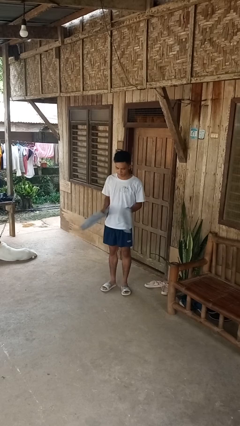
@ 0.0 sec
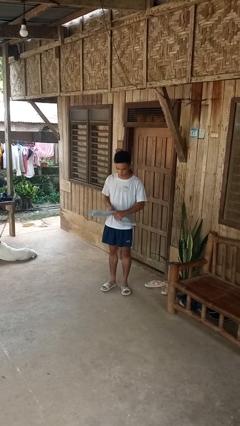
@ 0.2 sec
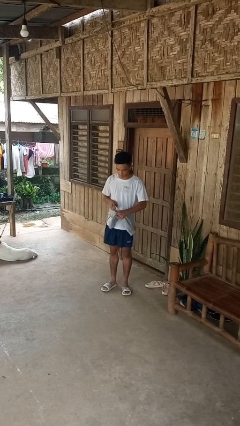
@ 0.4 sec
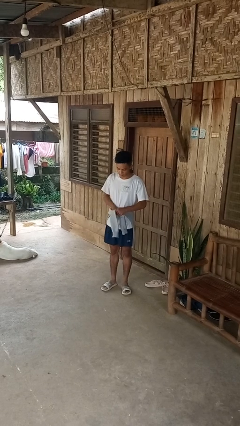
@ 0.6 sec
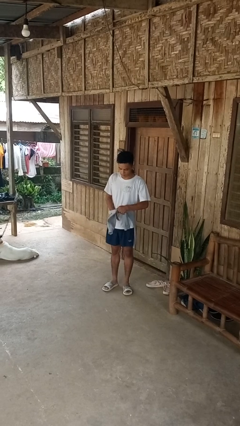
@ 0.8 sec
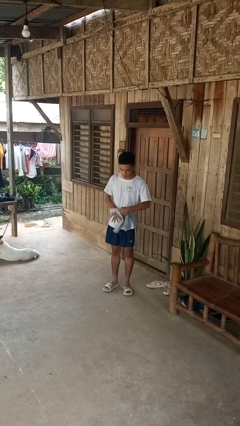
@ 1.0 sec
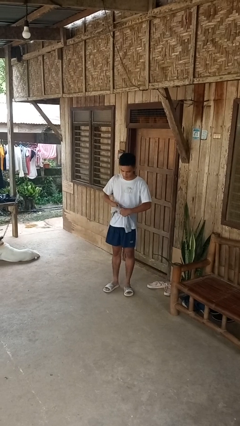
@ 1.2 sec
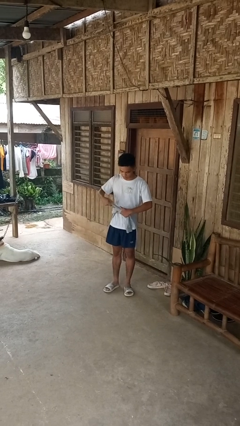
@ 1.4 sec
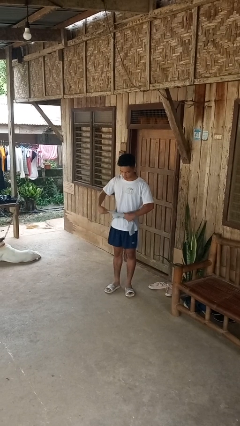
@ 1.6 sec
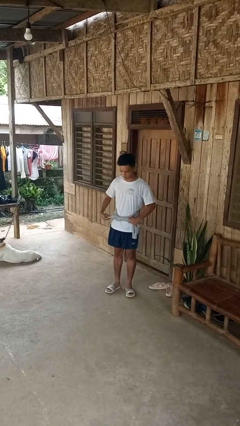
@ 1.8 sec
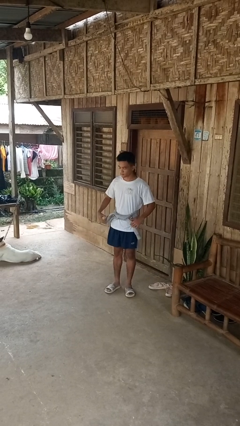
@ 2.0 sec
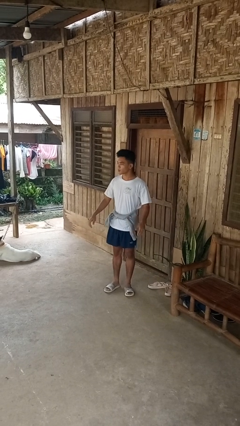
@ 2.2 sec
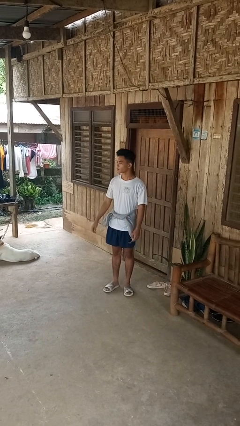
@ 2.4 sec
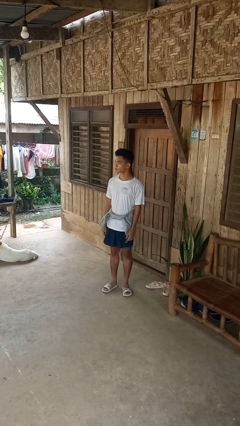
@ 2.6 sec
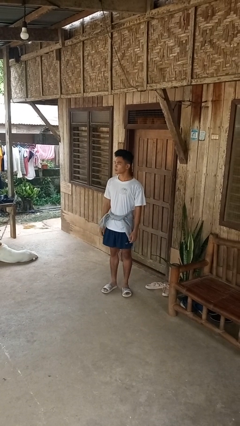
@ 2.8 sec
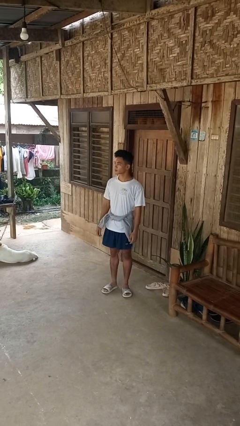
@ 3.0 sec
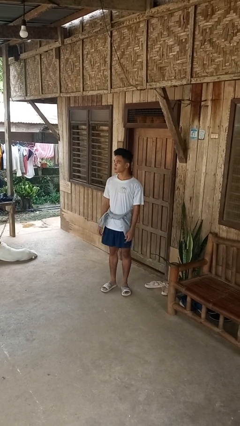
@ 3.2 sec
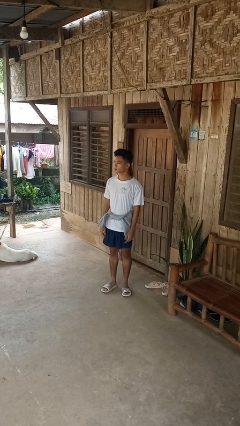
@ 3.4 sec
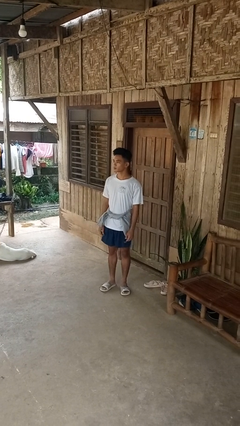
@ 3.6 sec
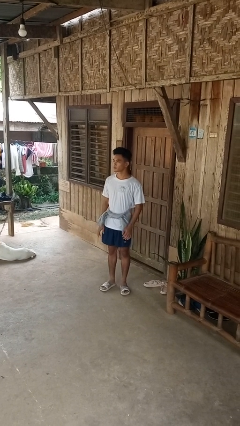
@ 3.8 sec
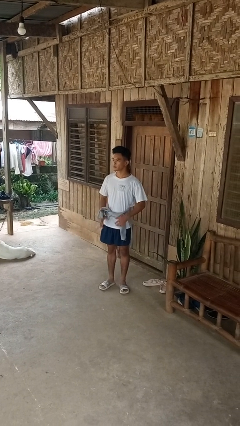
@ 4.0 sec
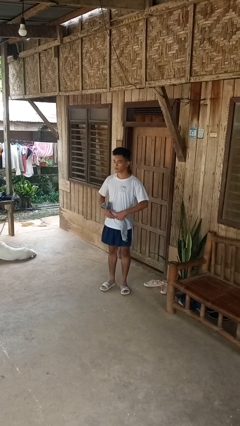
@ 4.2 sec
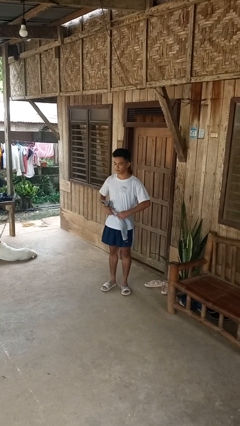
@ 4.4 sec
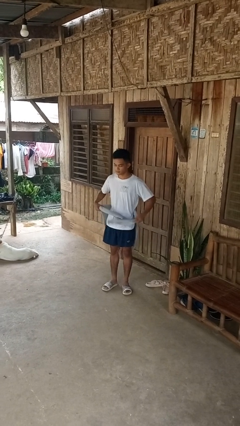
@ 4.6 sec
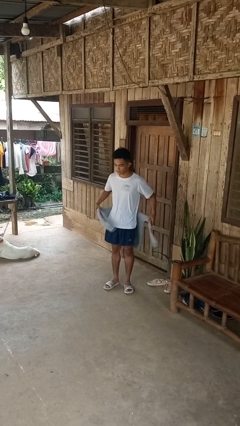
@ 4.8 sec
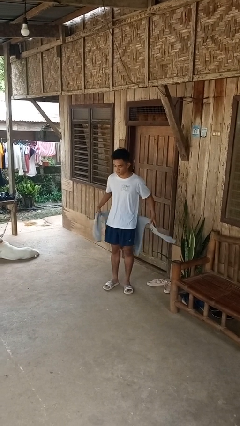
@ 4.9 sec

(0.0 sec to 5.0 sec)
person ties jacket around waist

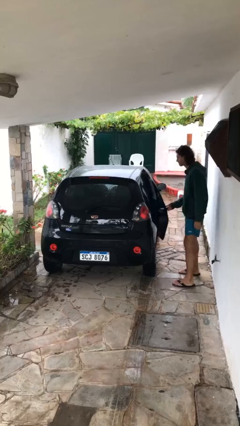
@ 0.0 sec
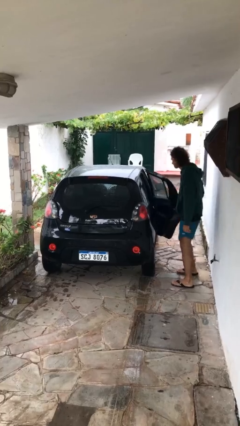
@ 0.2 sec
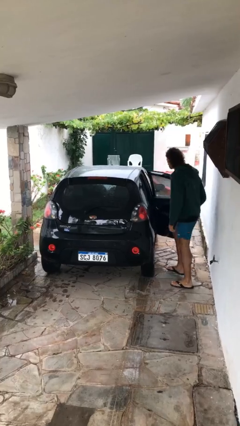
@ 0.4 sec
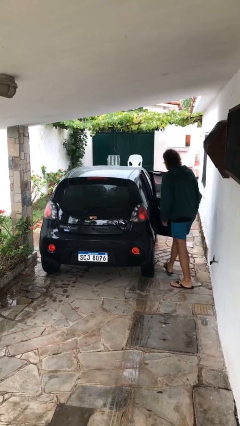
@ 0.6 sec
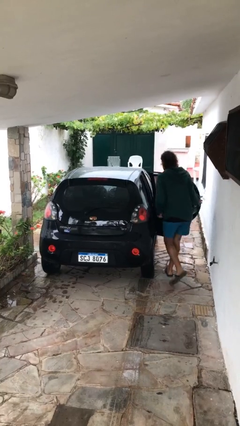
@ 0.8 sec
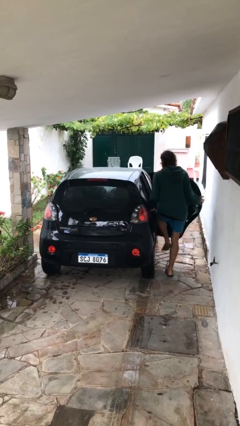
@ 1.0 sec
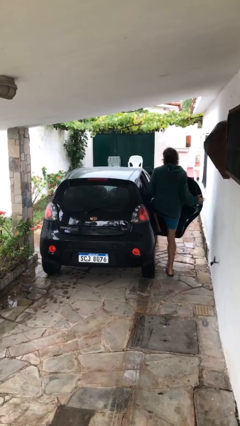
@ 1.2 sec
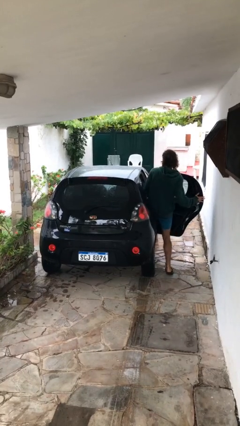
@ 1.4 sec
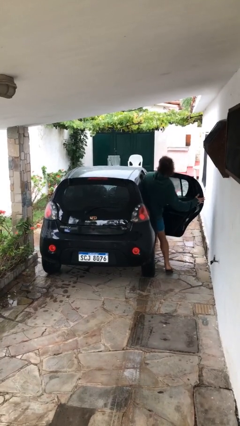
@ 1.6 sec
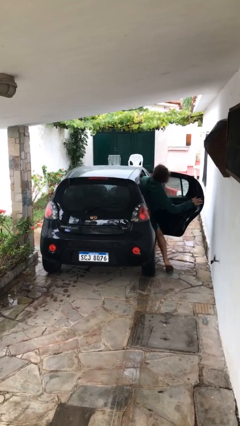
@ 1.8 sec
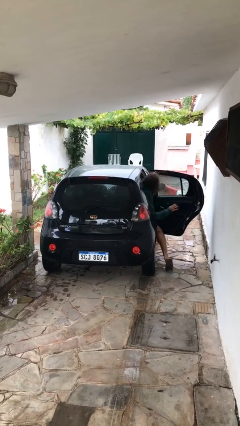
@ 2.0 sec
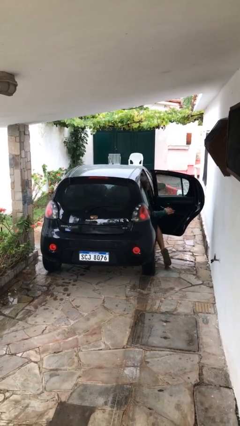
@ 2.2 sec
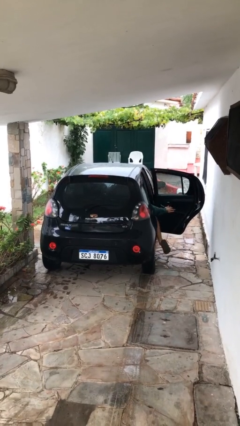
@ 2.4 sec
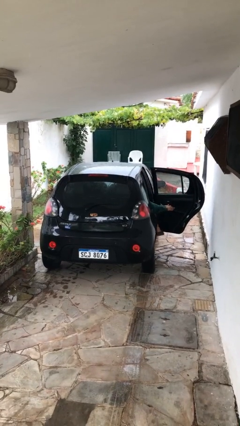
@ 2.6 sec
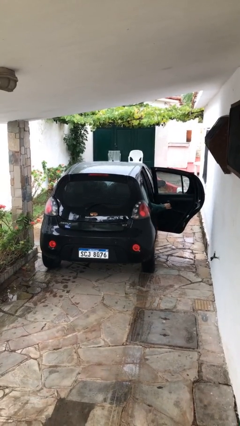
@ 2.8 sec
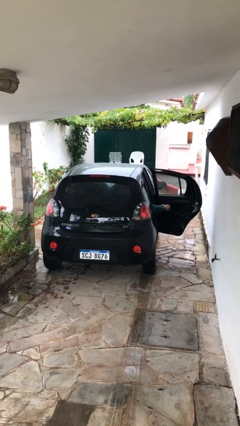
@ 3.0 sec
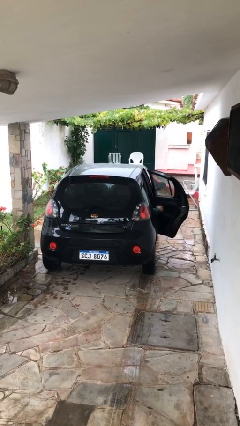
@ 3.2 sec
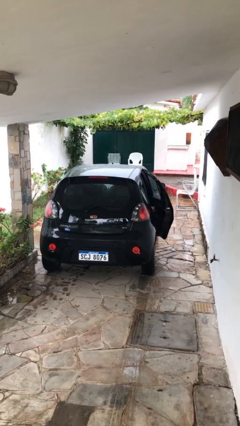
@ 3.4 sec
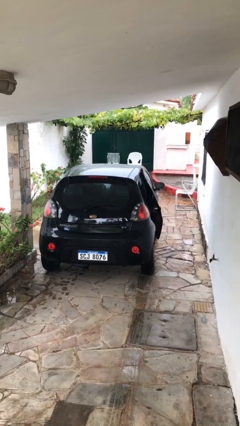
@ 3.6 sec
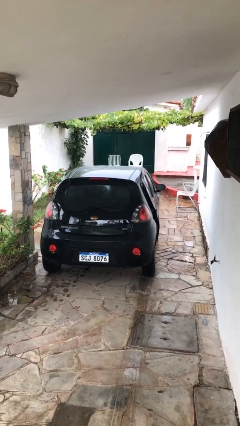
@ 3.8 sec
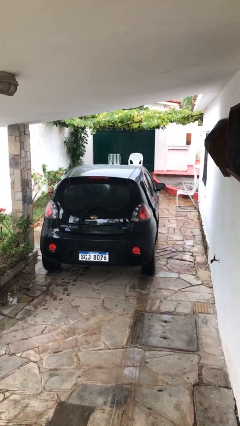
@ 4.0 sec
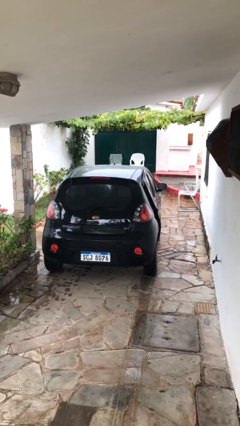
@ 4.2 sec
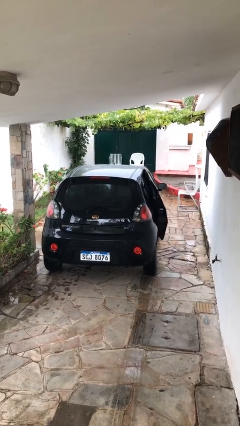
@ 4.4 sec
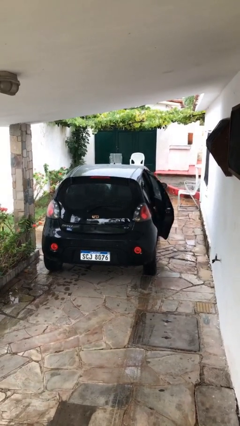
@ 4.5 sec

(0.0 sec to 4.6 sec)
car picks up person

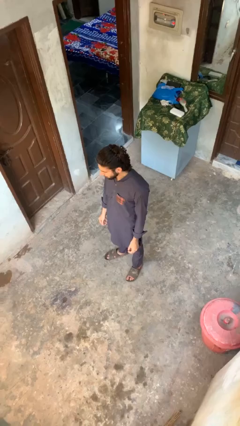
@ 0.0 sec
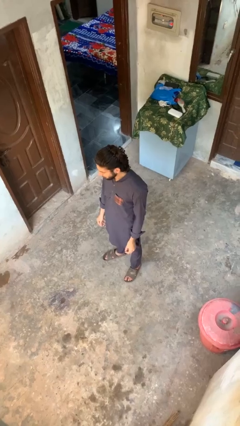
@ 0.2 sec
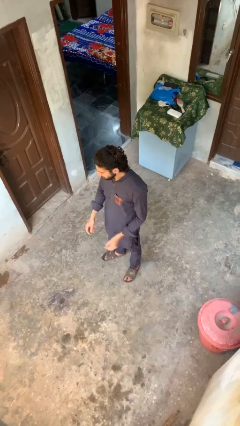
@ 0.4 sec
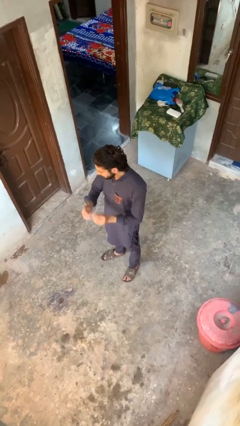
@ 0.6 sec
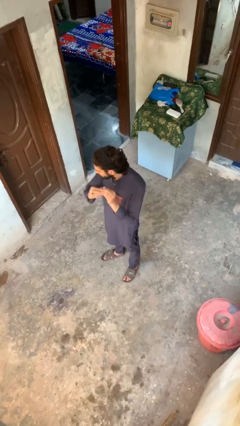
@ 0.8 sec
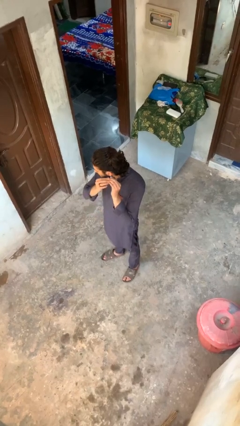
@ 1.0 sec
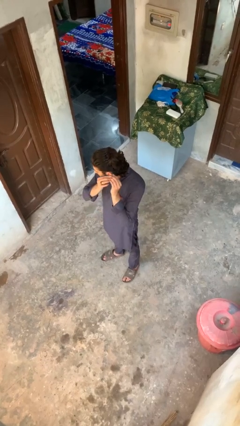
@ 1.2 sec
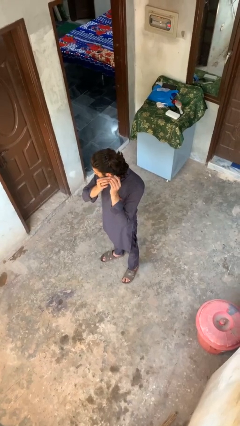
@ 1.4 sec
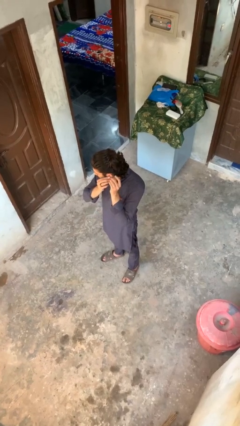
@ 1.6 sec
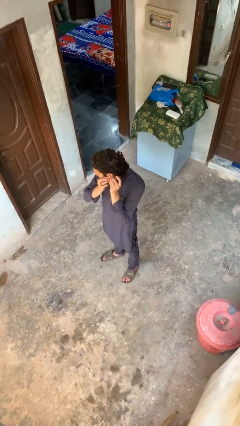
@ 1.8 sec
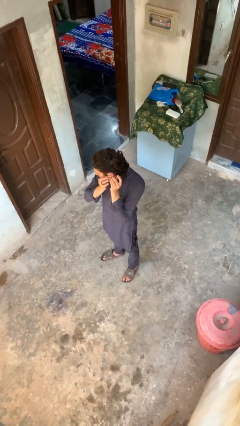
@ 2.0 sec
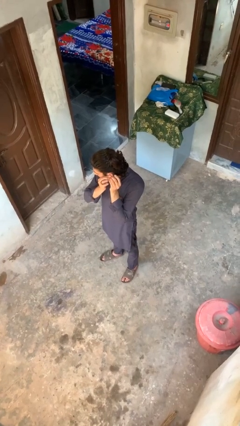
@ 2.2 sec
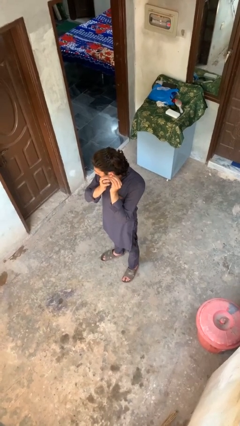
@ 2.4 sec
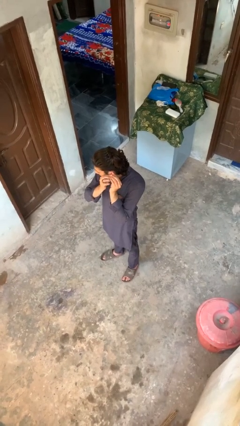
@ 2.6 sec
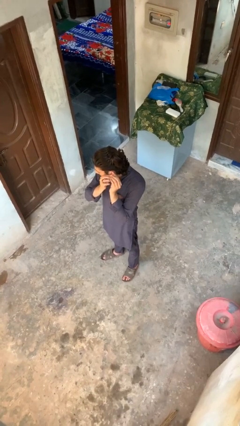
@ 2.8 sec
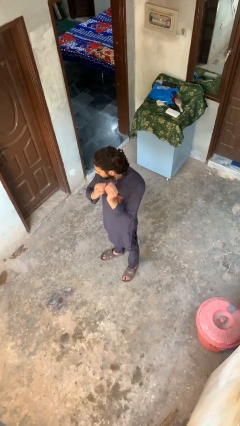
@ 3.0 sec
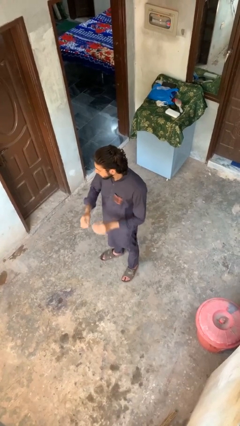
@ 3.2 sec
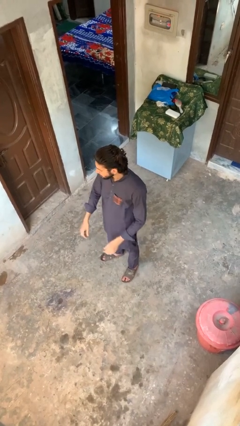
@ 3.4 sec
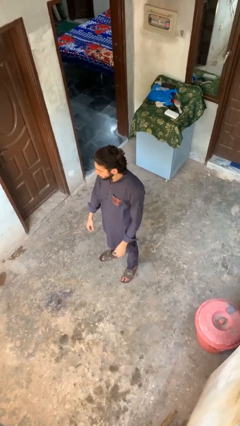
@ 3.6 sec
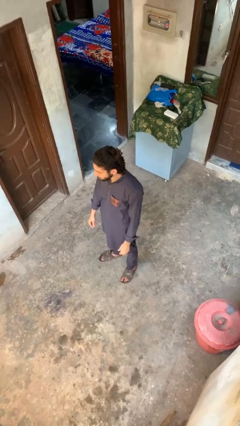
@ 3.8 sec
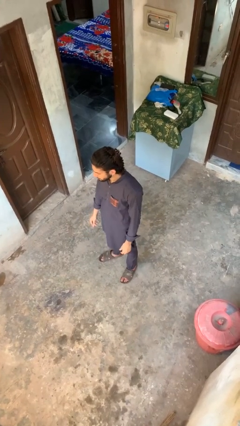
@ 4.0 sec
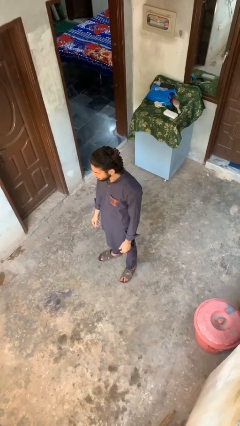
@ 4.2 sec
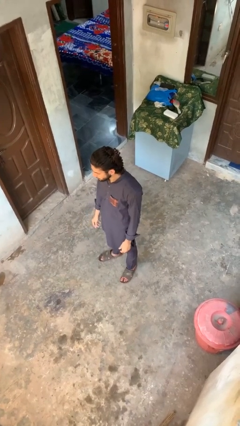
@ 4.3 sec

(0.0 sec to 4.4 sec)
person puts on earrings

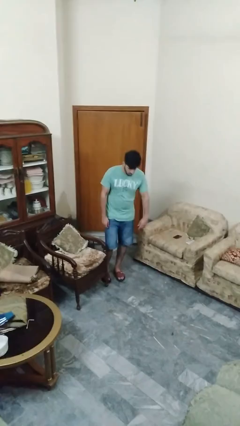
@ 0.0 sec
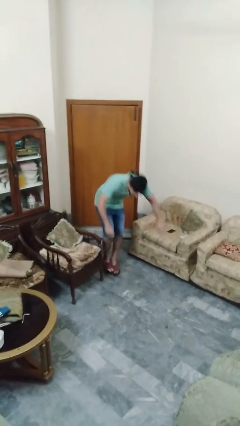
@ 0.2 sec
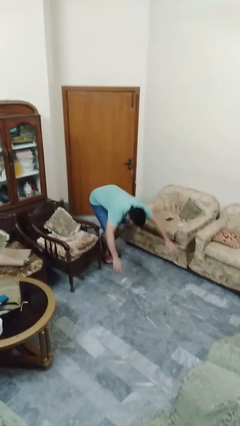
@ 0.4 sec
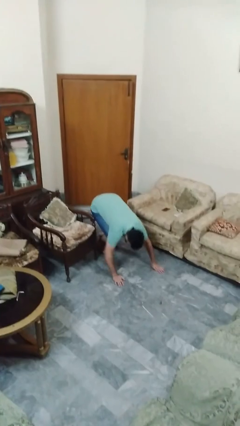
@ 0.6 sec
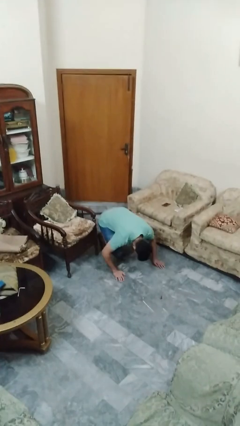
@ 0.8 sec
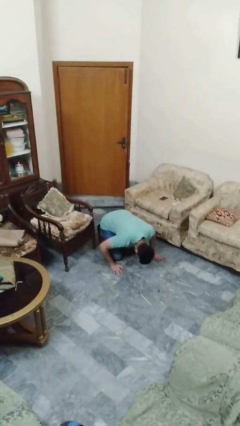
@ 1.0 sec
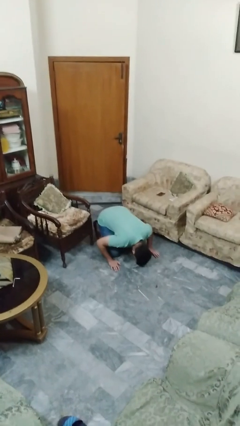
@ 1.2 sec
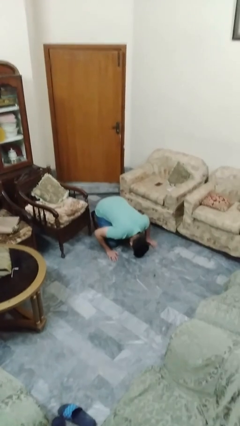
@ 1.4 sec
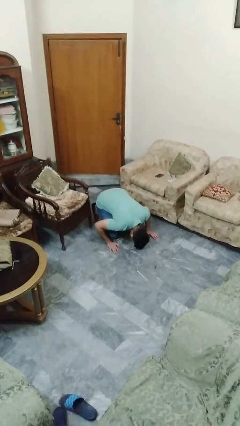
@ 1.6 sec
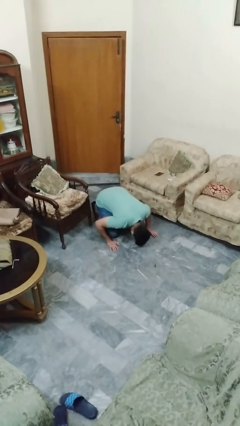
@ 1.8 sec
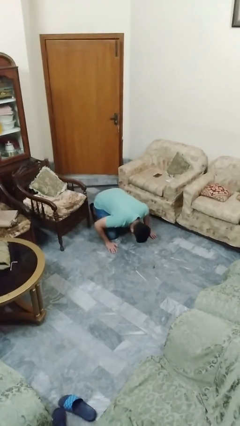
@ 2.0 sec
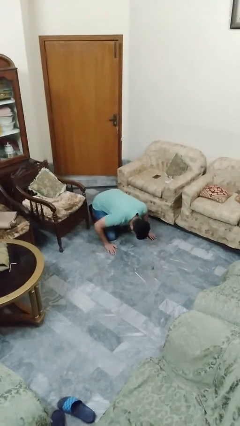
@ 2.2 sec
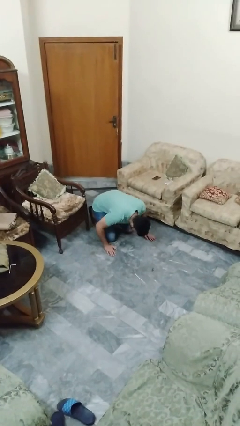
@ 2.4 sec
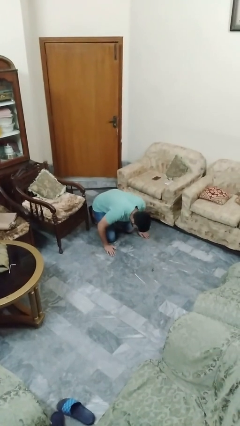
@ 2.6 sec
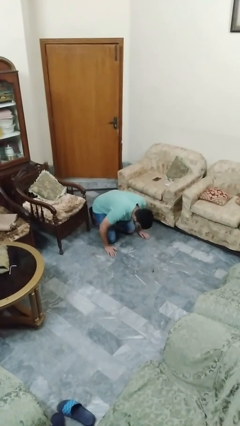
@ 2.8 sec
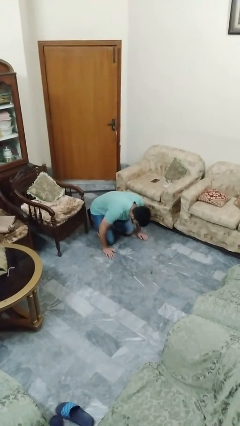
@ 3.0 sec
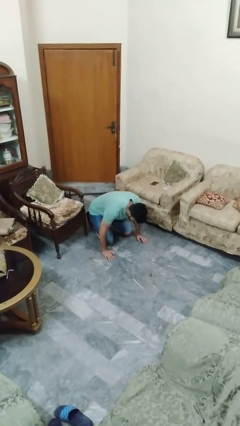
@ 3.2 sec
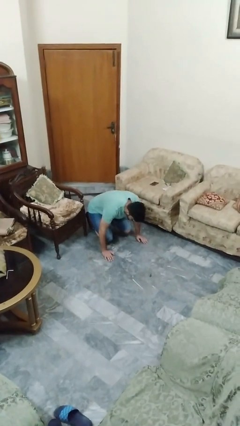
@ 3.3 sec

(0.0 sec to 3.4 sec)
person trips on object on floor

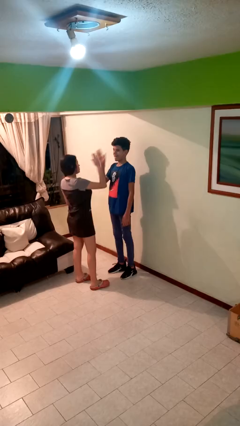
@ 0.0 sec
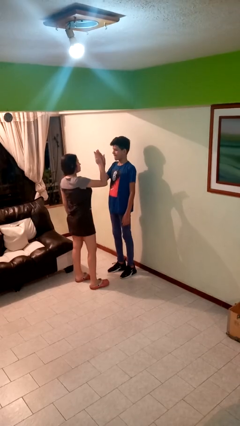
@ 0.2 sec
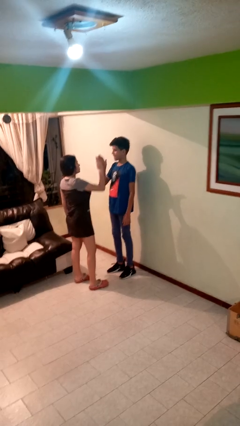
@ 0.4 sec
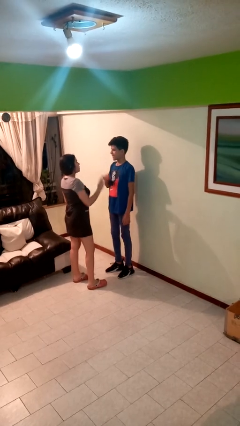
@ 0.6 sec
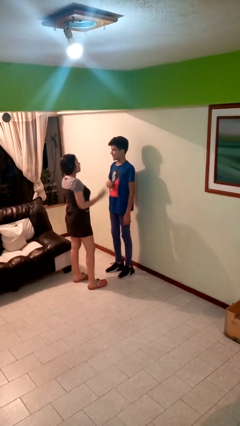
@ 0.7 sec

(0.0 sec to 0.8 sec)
person highfives hand
